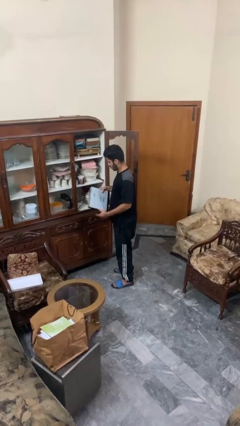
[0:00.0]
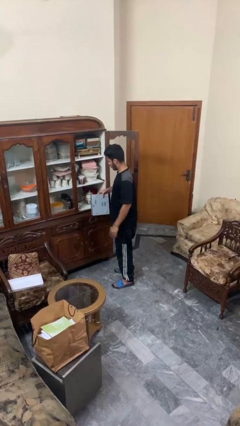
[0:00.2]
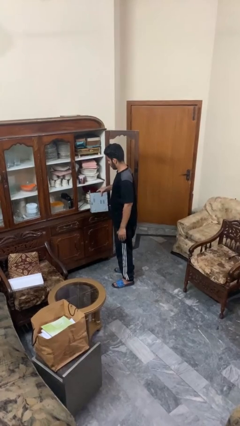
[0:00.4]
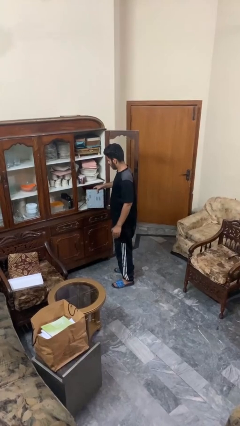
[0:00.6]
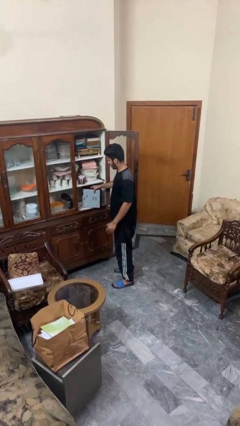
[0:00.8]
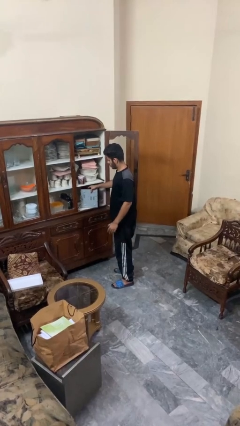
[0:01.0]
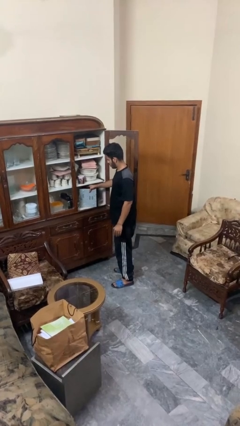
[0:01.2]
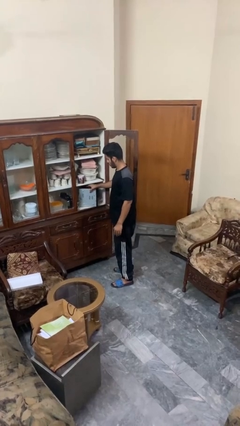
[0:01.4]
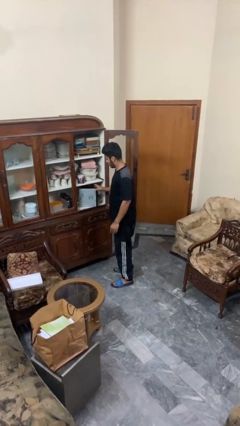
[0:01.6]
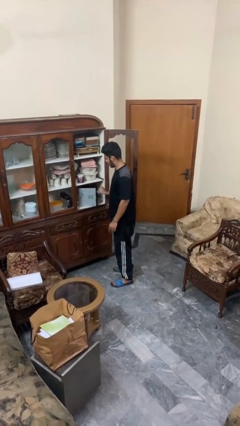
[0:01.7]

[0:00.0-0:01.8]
person puts down object into cabinet

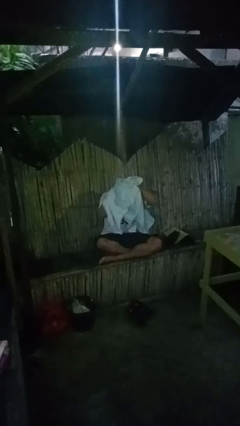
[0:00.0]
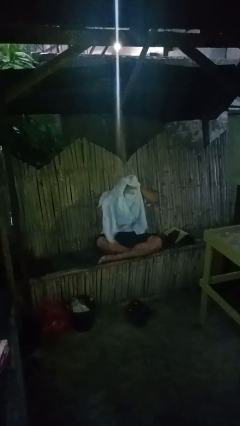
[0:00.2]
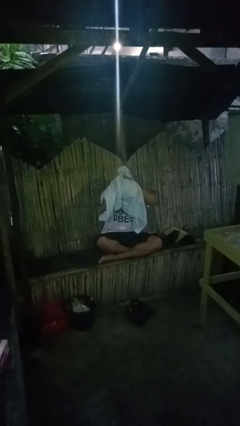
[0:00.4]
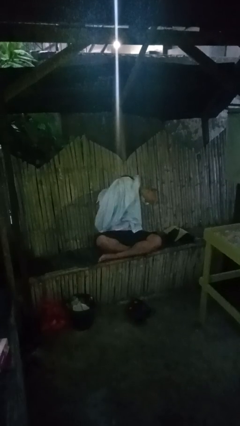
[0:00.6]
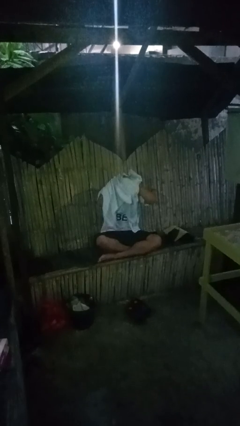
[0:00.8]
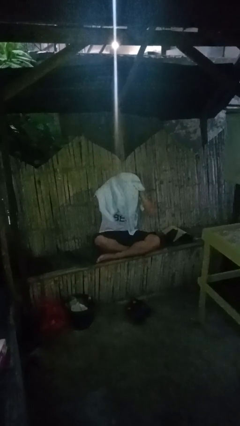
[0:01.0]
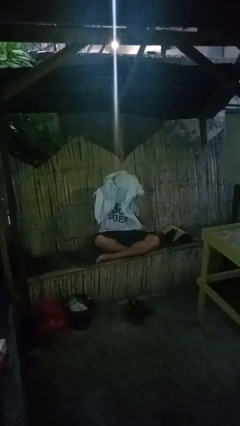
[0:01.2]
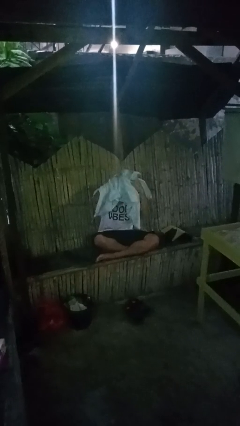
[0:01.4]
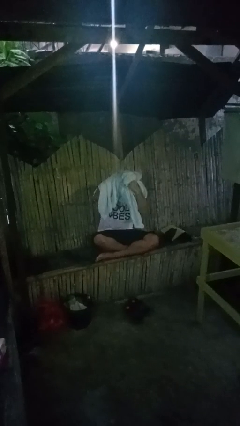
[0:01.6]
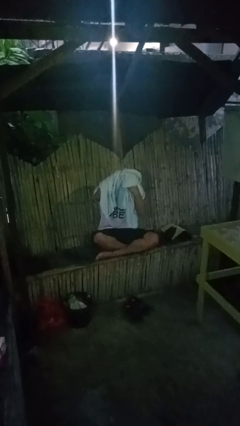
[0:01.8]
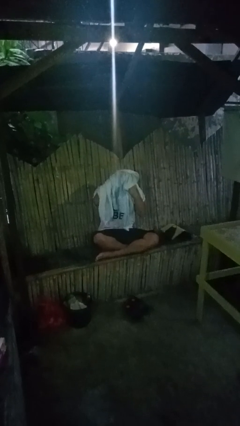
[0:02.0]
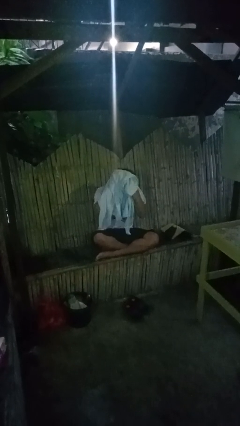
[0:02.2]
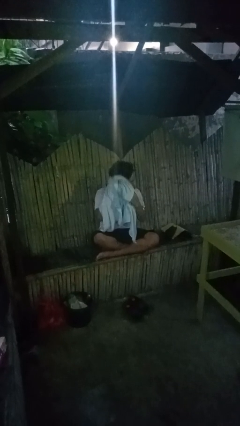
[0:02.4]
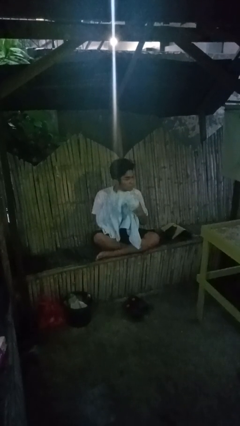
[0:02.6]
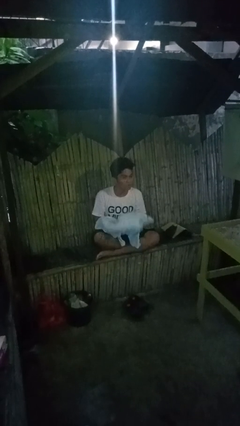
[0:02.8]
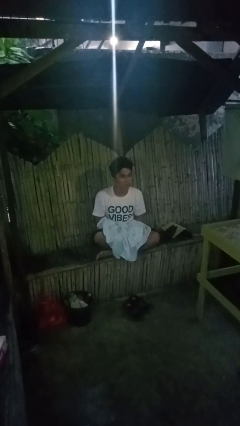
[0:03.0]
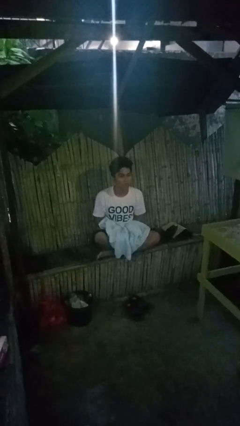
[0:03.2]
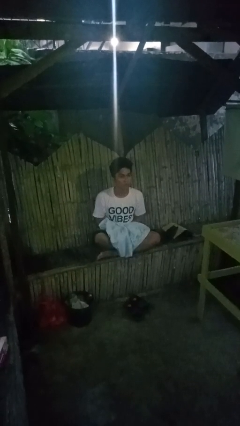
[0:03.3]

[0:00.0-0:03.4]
person dries hair with towel

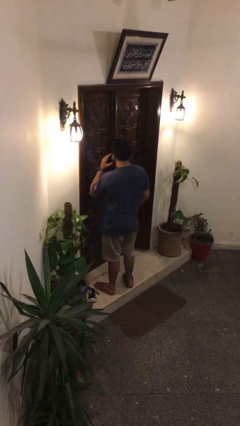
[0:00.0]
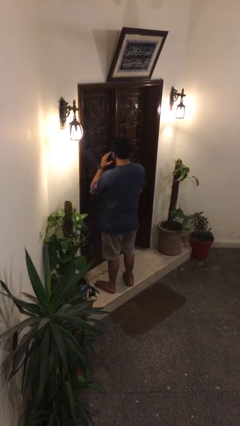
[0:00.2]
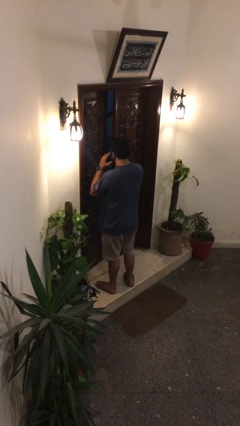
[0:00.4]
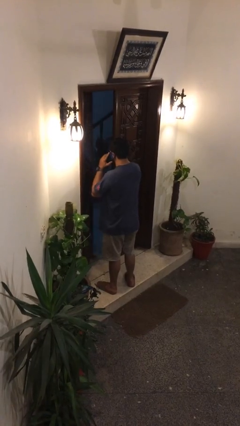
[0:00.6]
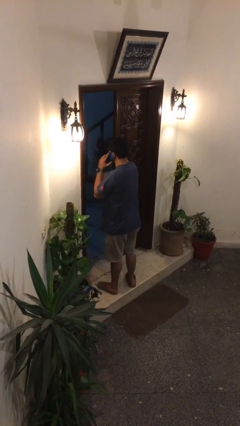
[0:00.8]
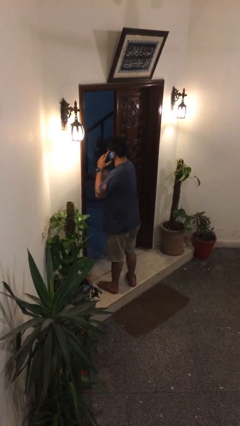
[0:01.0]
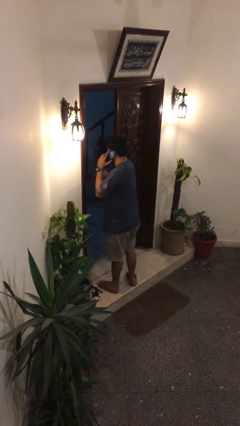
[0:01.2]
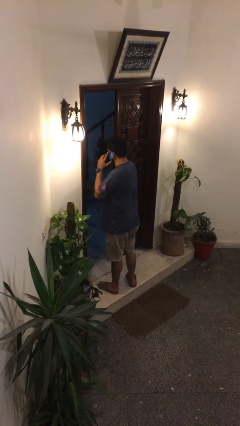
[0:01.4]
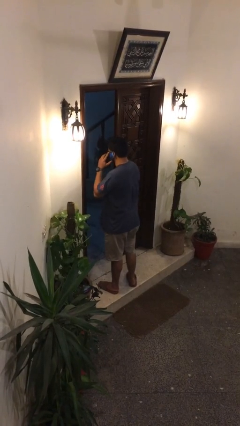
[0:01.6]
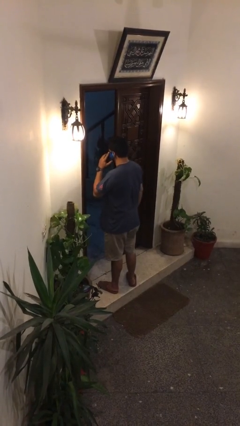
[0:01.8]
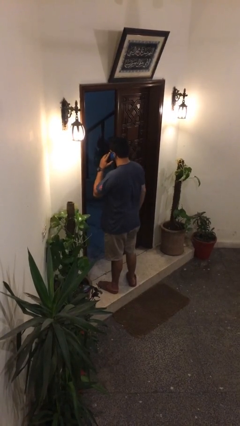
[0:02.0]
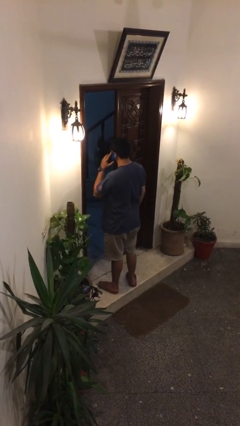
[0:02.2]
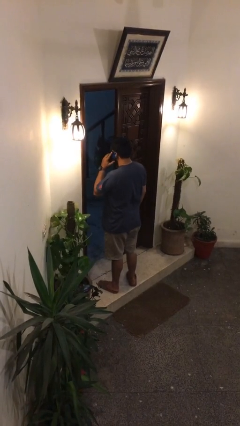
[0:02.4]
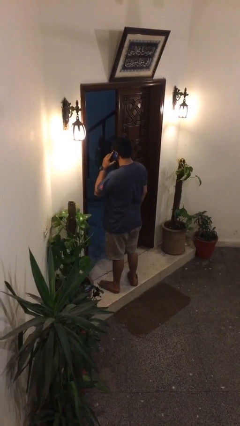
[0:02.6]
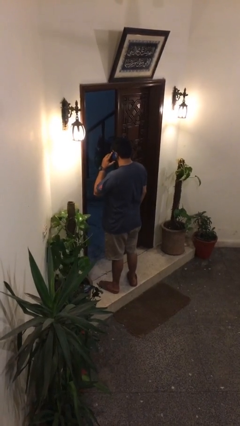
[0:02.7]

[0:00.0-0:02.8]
person opens facility door

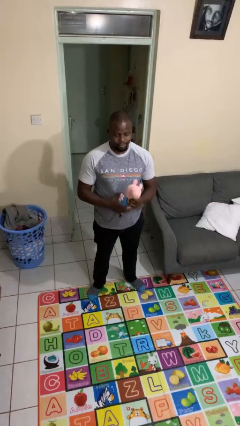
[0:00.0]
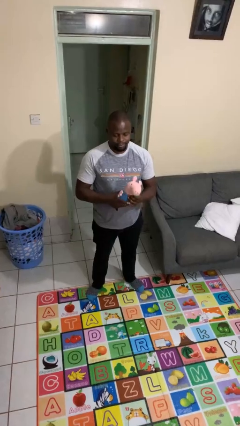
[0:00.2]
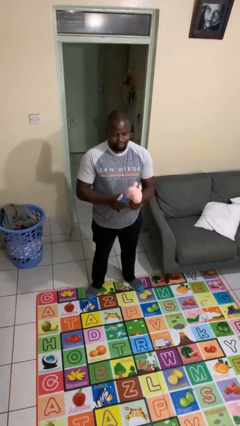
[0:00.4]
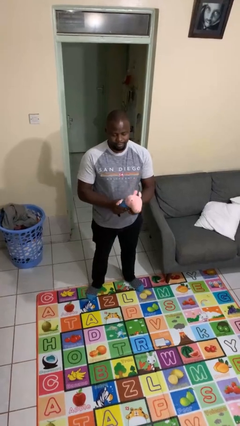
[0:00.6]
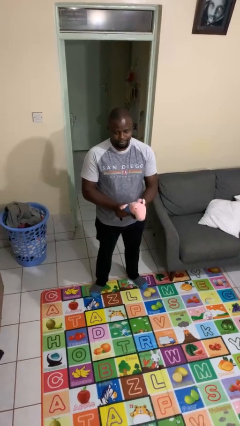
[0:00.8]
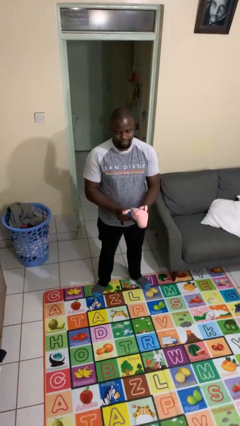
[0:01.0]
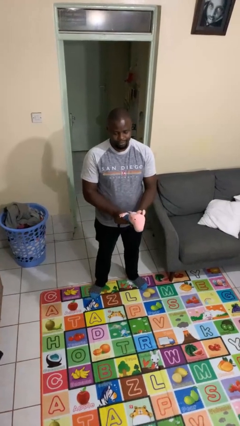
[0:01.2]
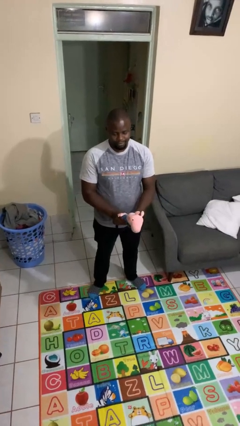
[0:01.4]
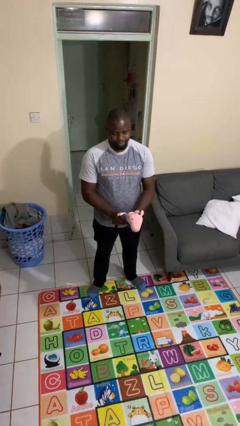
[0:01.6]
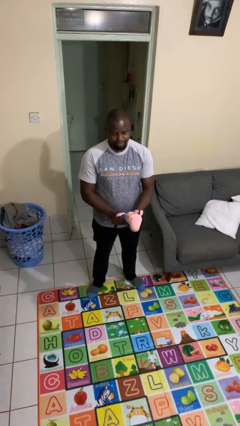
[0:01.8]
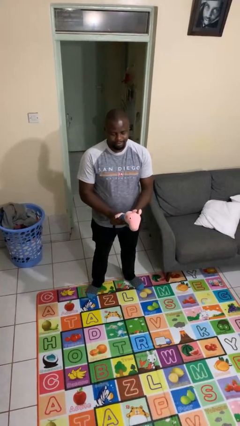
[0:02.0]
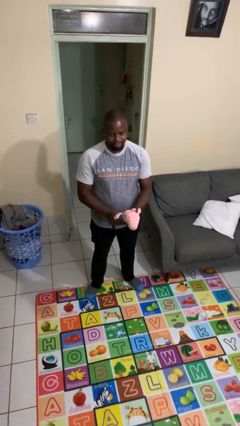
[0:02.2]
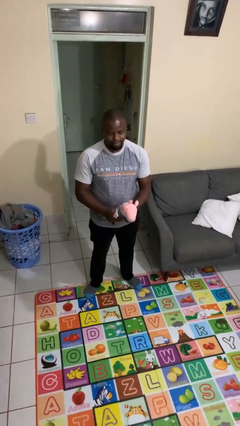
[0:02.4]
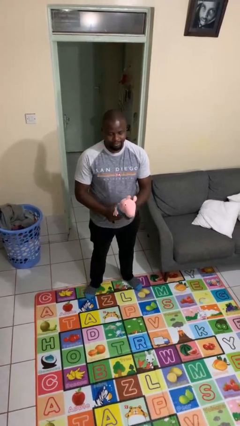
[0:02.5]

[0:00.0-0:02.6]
person squeezes object

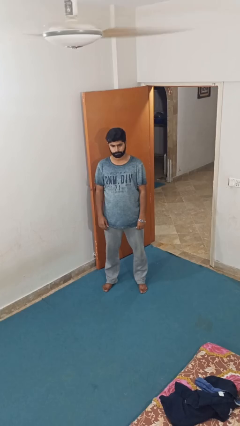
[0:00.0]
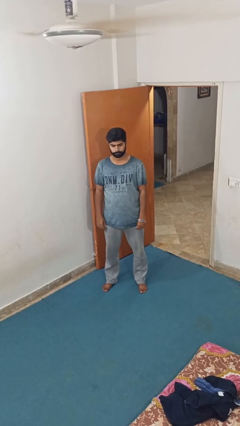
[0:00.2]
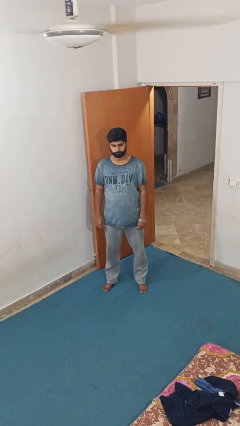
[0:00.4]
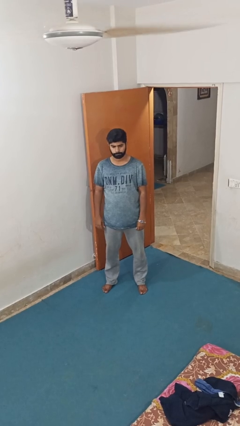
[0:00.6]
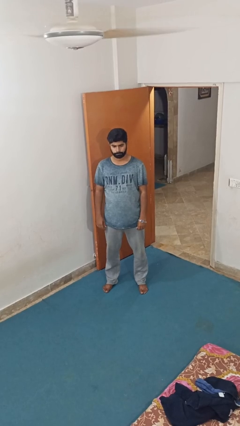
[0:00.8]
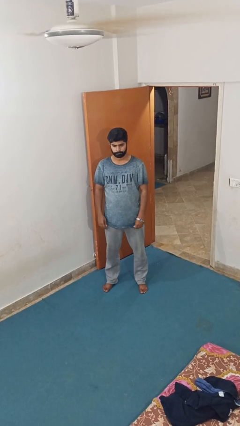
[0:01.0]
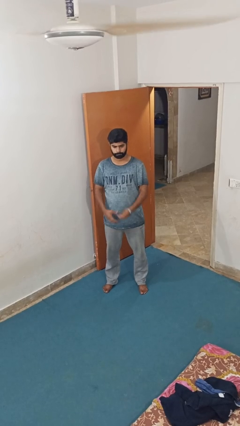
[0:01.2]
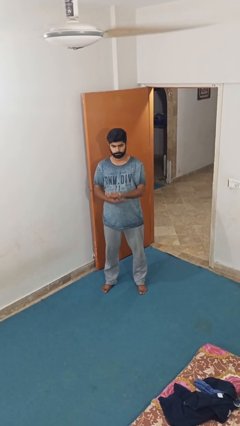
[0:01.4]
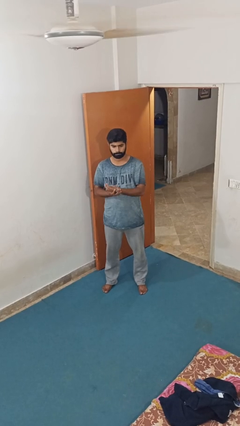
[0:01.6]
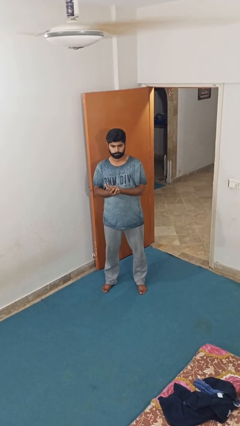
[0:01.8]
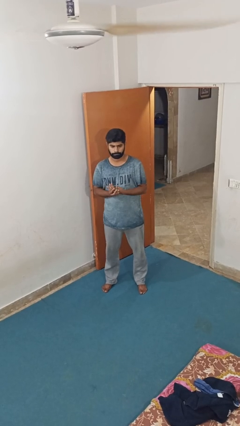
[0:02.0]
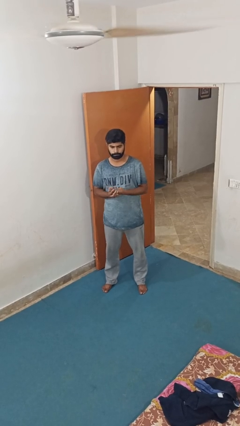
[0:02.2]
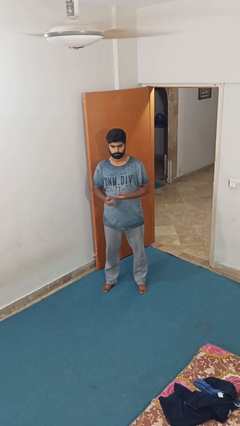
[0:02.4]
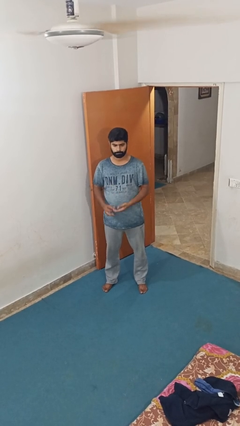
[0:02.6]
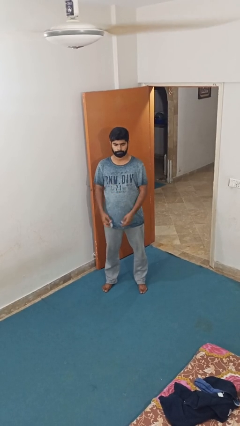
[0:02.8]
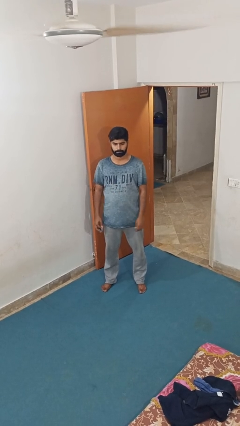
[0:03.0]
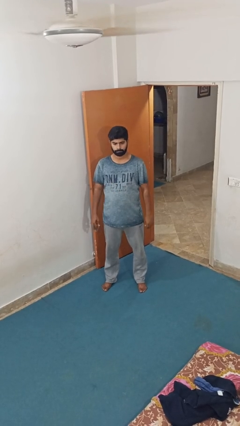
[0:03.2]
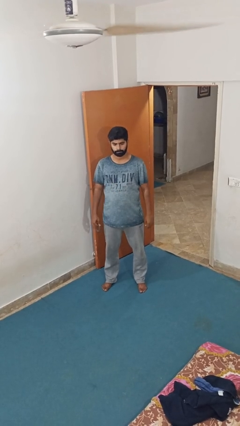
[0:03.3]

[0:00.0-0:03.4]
person takes off wristwatch

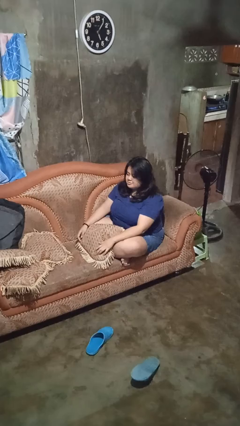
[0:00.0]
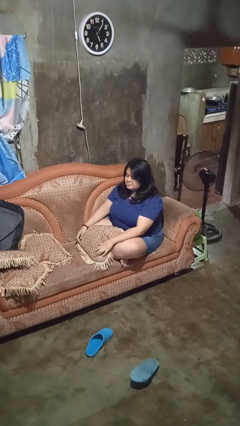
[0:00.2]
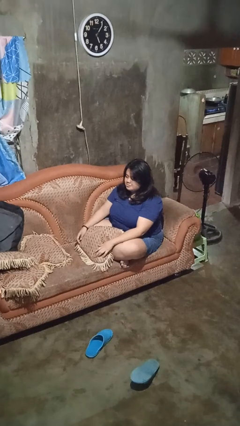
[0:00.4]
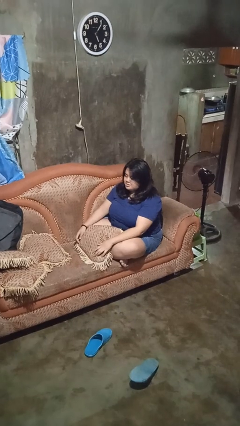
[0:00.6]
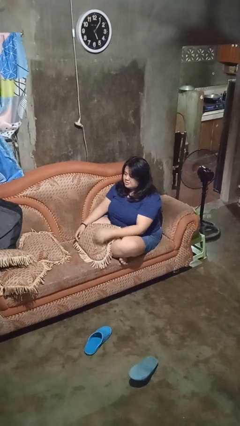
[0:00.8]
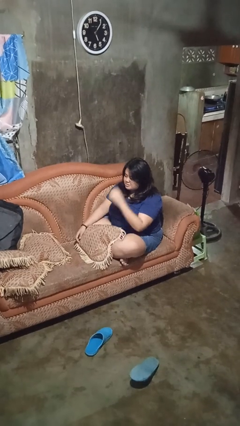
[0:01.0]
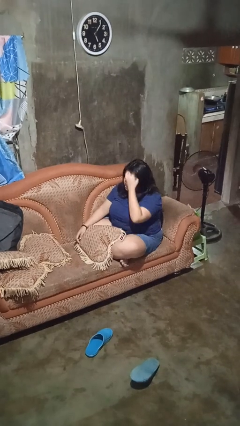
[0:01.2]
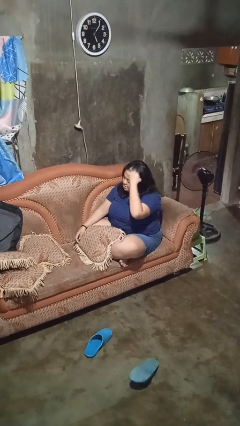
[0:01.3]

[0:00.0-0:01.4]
person strokes hair

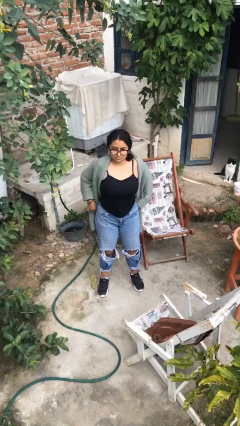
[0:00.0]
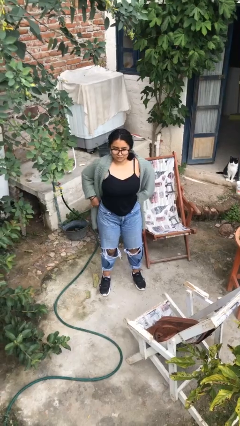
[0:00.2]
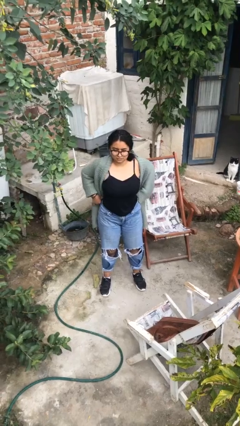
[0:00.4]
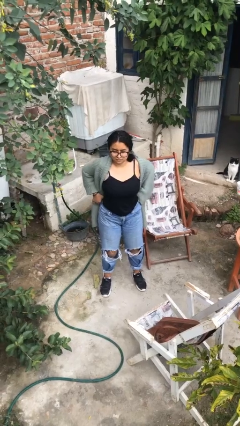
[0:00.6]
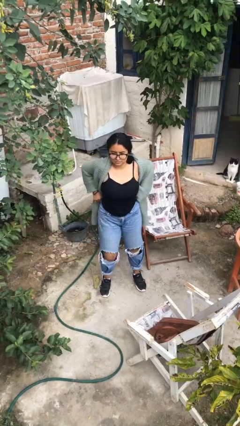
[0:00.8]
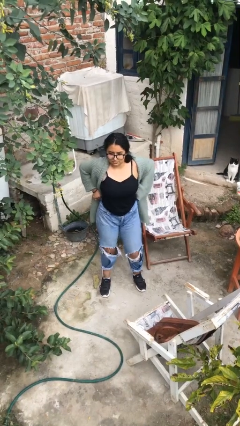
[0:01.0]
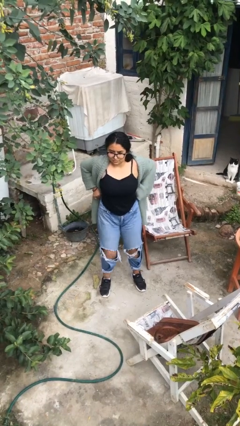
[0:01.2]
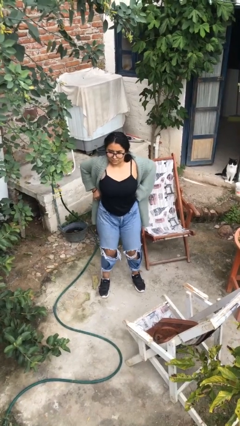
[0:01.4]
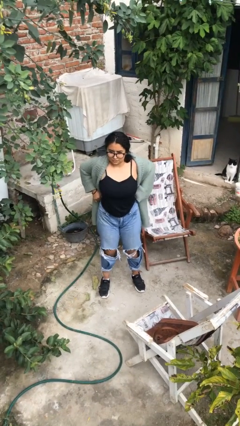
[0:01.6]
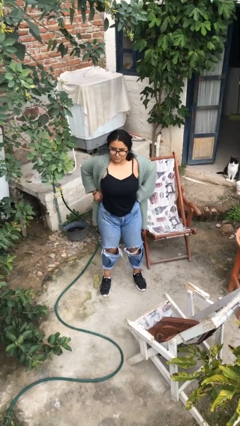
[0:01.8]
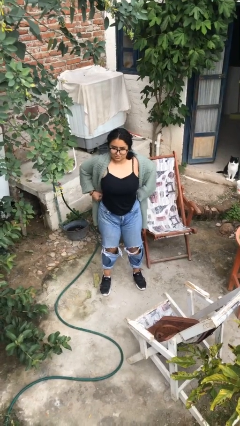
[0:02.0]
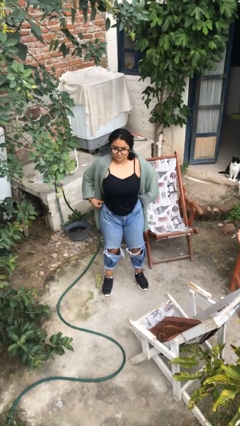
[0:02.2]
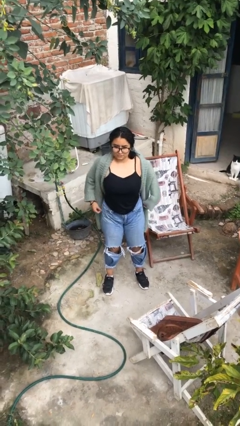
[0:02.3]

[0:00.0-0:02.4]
person hikes up pants
